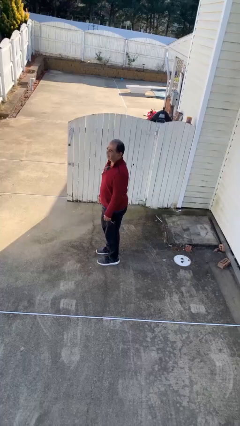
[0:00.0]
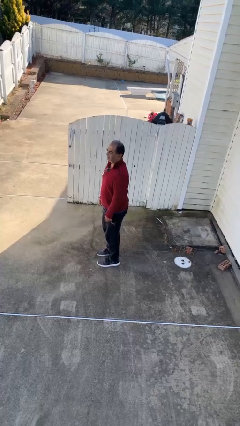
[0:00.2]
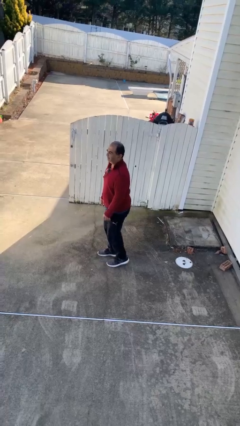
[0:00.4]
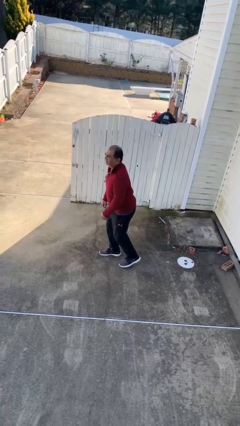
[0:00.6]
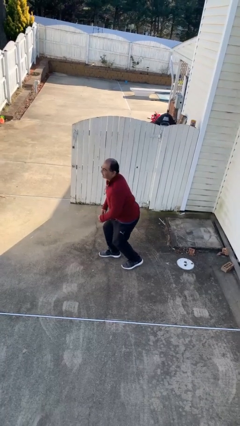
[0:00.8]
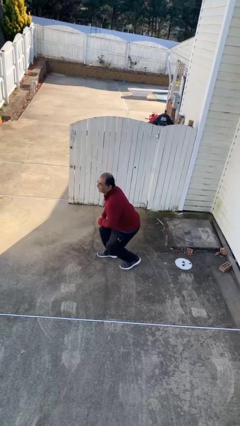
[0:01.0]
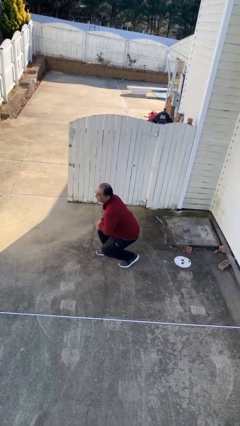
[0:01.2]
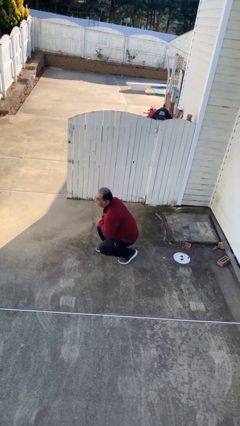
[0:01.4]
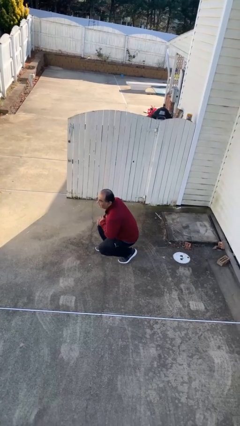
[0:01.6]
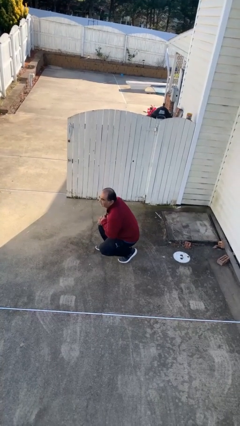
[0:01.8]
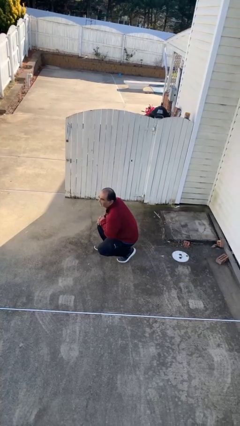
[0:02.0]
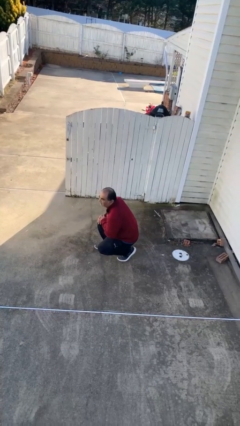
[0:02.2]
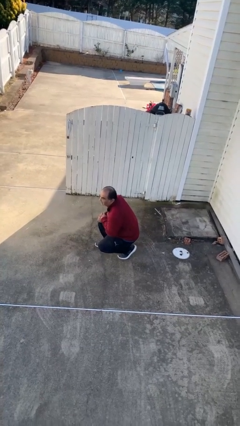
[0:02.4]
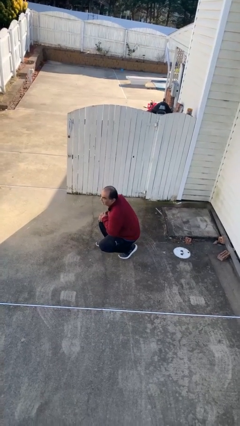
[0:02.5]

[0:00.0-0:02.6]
person sits down

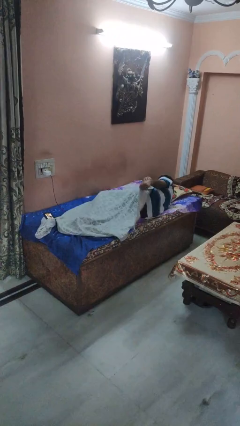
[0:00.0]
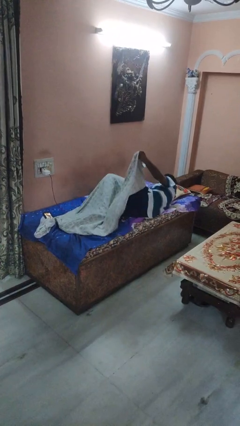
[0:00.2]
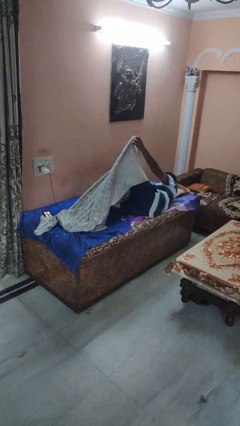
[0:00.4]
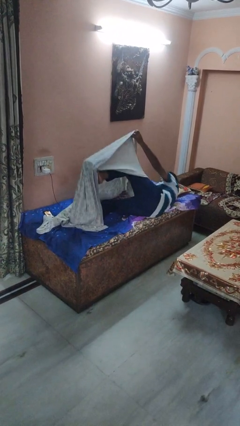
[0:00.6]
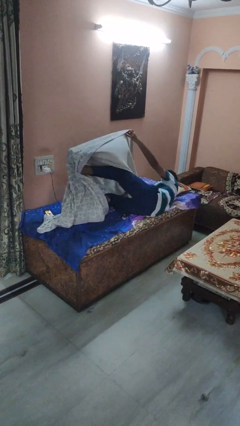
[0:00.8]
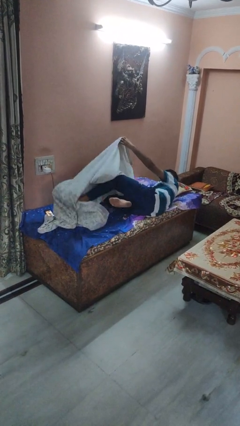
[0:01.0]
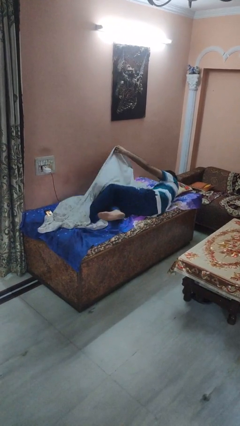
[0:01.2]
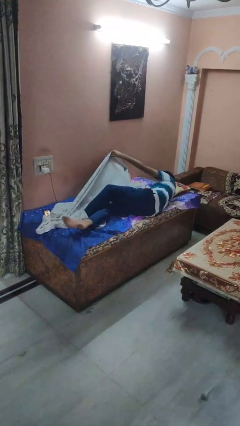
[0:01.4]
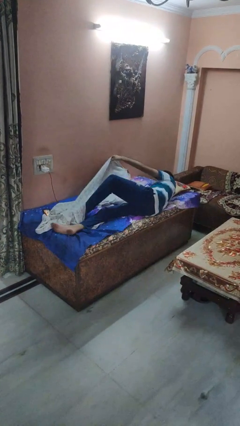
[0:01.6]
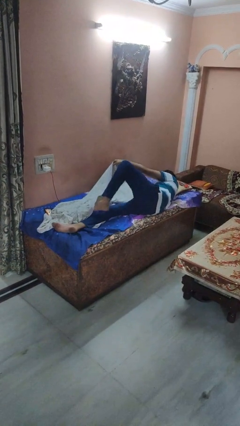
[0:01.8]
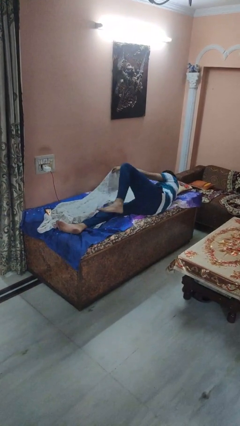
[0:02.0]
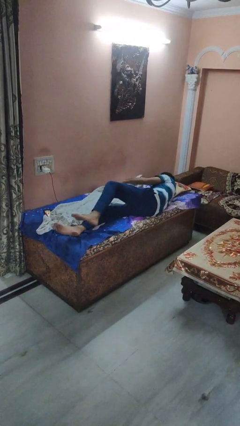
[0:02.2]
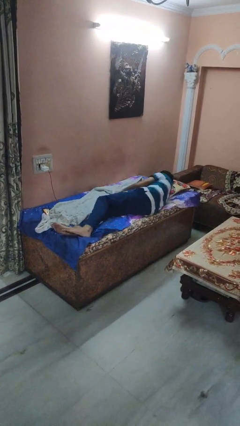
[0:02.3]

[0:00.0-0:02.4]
person uncovers with bedsheets

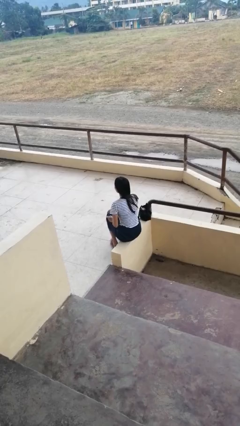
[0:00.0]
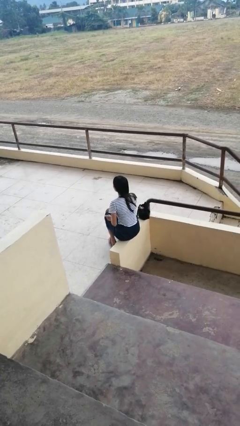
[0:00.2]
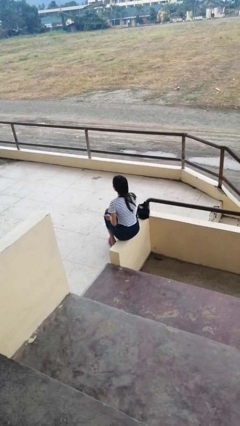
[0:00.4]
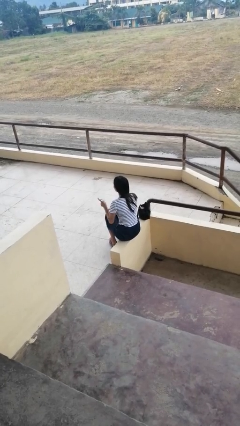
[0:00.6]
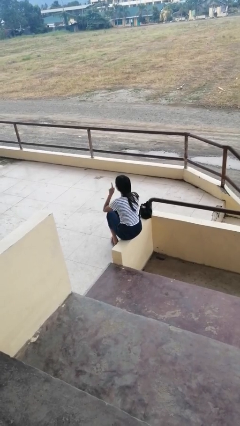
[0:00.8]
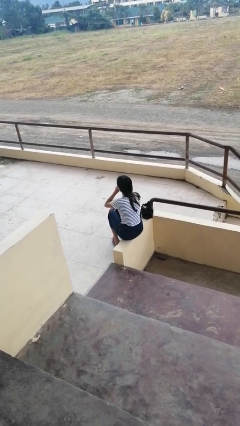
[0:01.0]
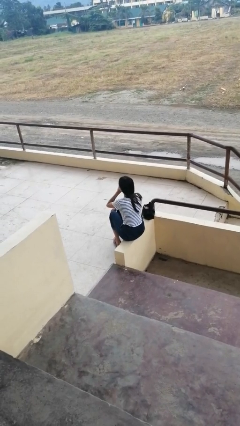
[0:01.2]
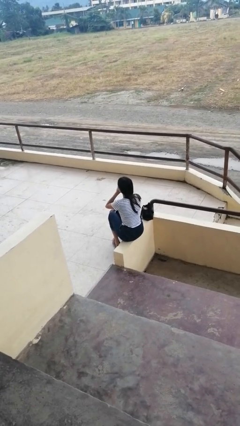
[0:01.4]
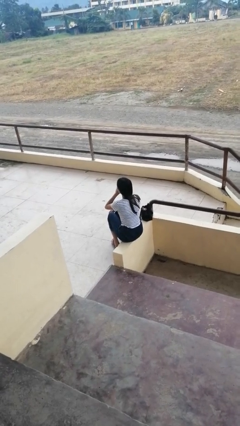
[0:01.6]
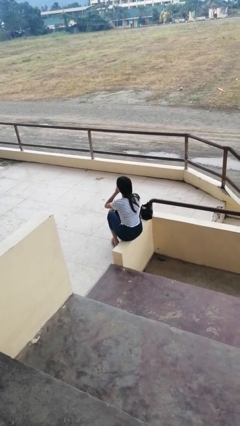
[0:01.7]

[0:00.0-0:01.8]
person gestures be quiet

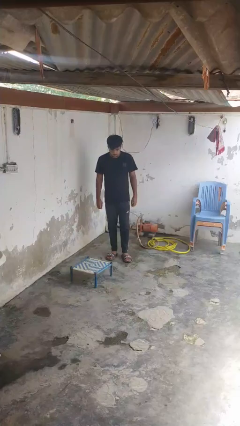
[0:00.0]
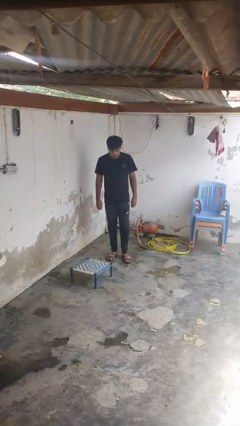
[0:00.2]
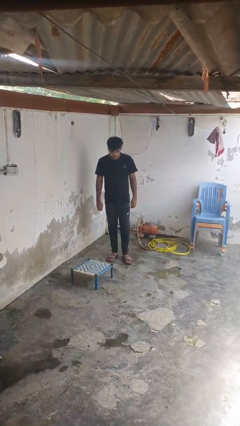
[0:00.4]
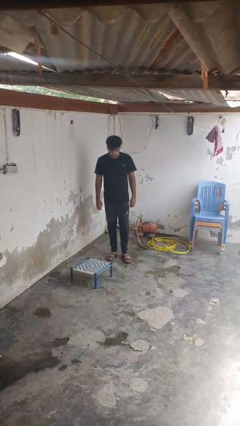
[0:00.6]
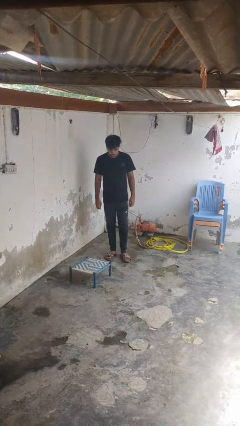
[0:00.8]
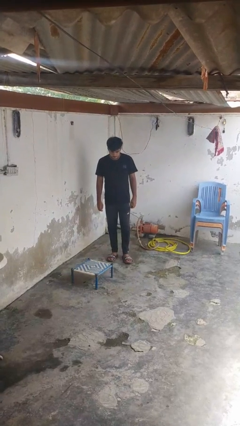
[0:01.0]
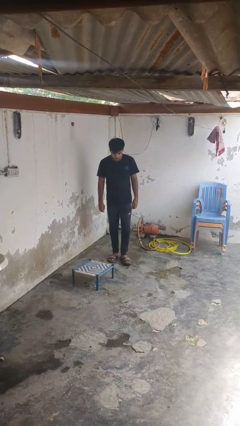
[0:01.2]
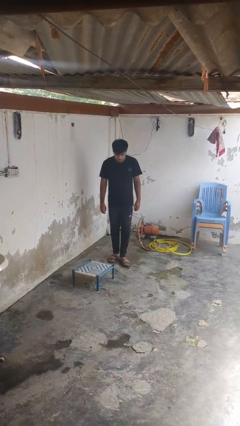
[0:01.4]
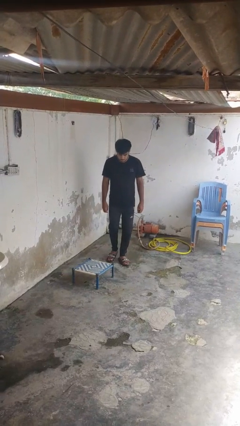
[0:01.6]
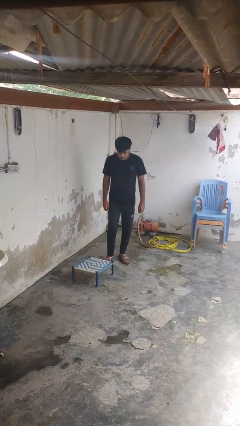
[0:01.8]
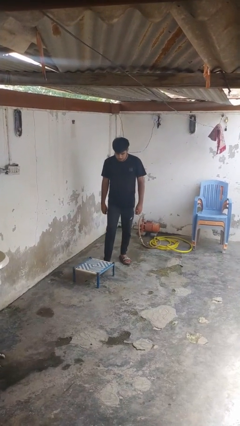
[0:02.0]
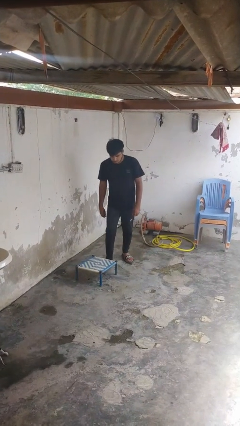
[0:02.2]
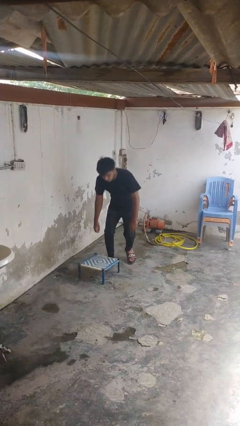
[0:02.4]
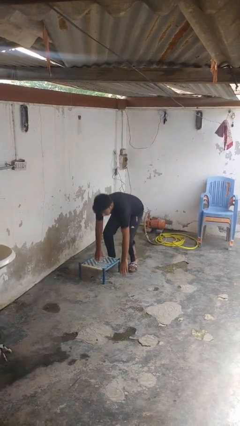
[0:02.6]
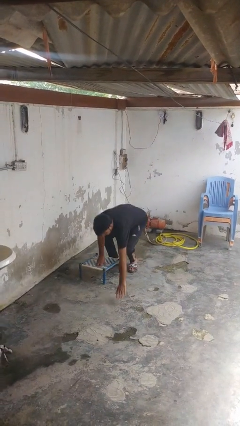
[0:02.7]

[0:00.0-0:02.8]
person trips on object on floor

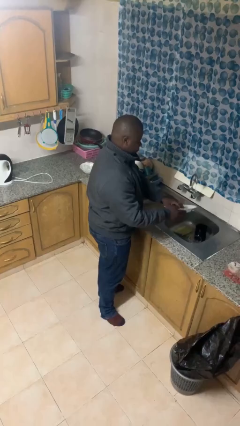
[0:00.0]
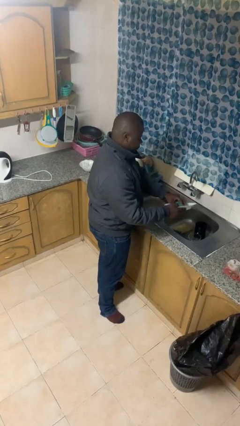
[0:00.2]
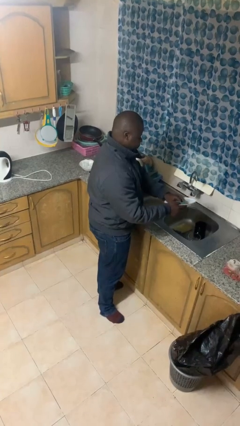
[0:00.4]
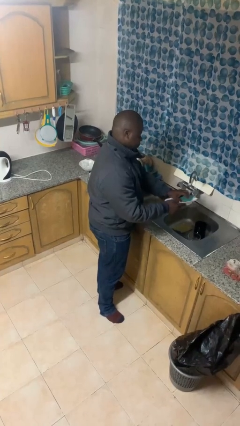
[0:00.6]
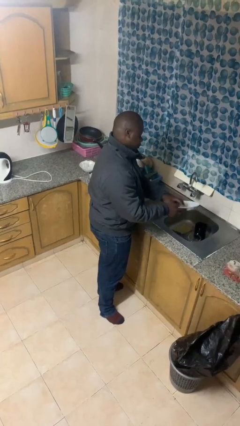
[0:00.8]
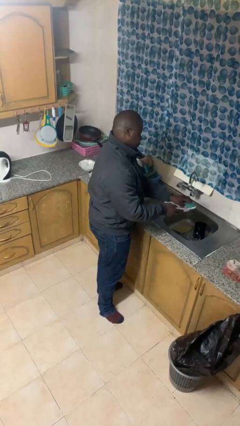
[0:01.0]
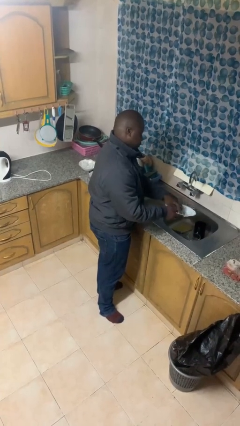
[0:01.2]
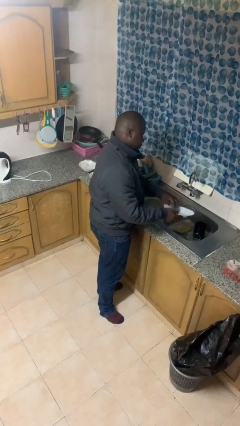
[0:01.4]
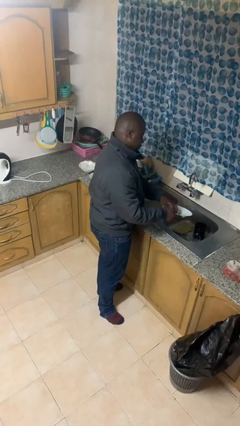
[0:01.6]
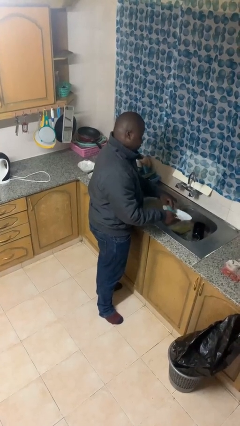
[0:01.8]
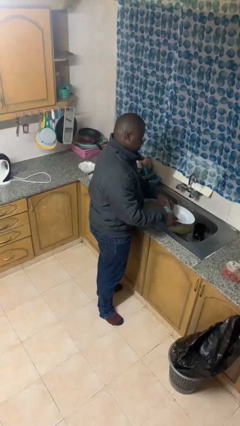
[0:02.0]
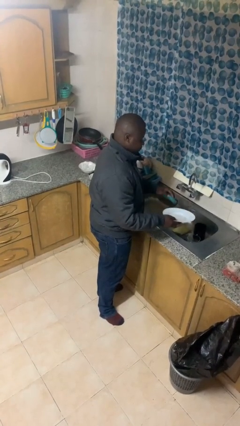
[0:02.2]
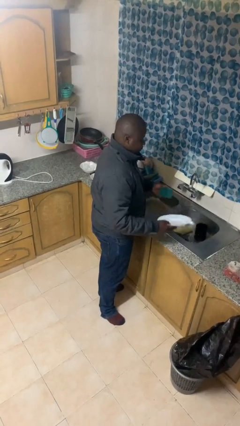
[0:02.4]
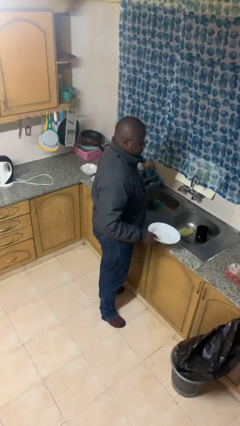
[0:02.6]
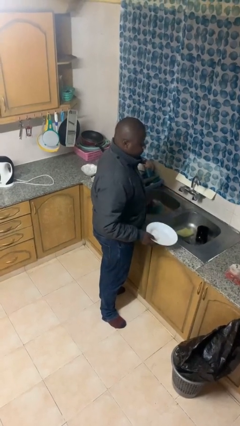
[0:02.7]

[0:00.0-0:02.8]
person washes dish

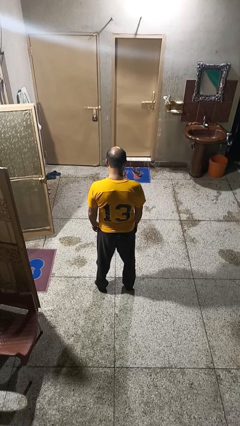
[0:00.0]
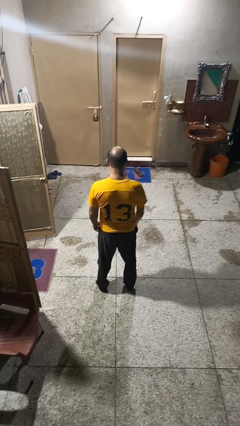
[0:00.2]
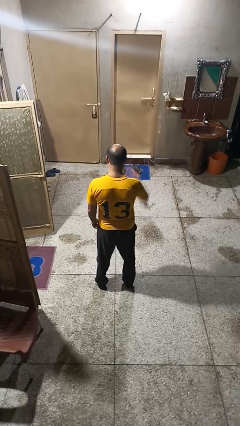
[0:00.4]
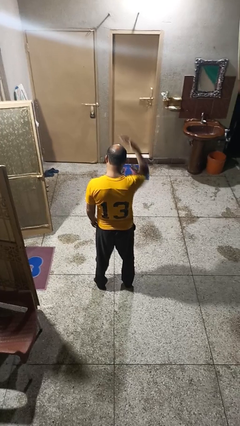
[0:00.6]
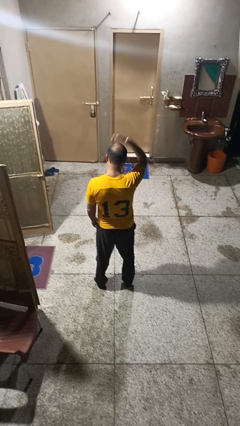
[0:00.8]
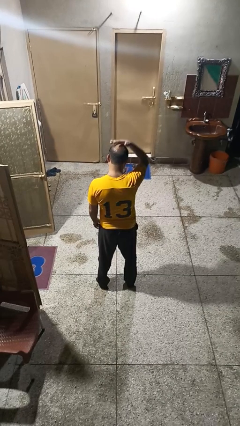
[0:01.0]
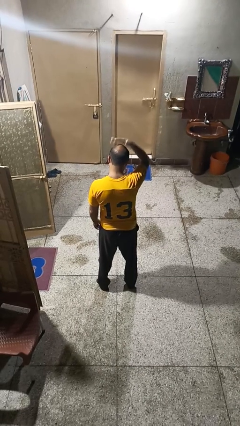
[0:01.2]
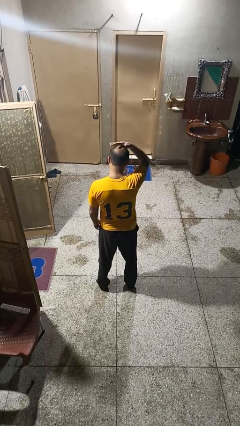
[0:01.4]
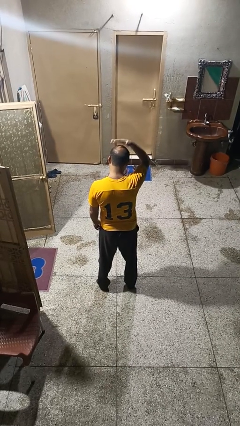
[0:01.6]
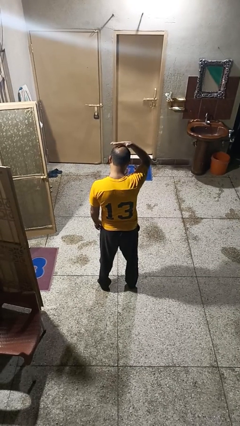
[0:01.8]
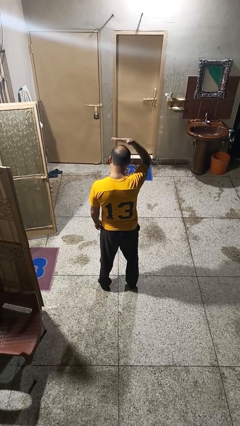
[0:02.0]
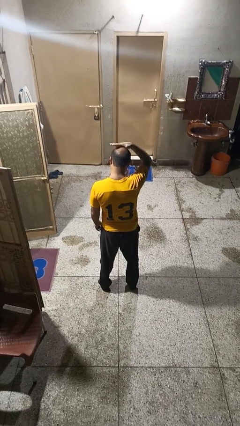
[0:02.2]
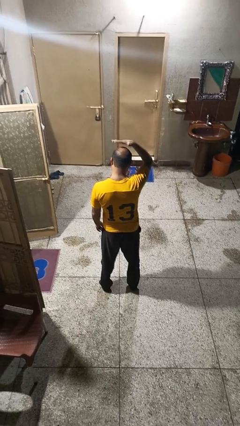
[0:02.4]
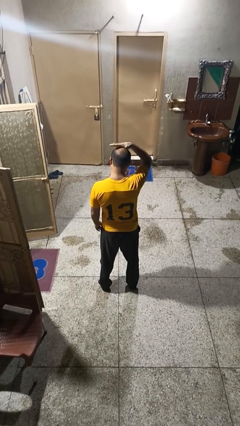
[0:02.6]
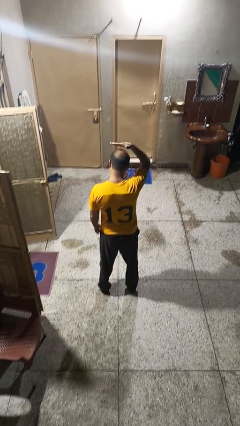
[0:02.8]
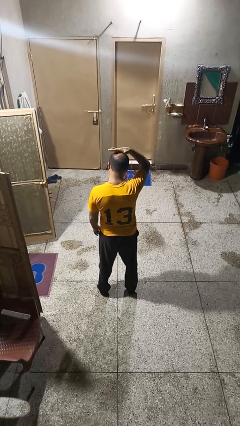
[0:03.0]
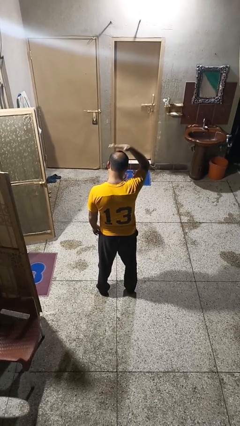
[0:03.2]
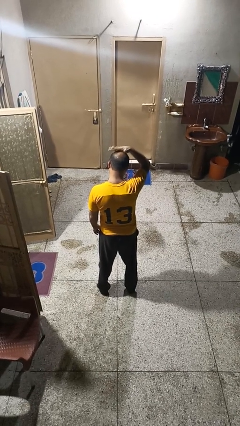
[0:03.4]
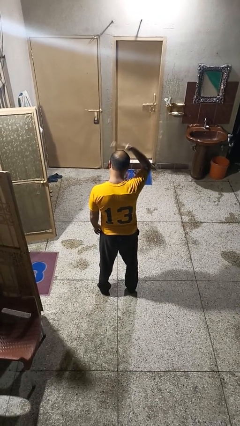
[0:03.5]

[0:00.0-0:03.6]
person pats head

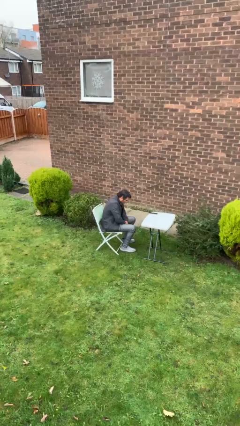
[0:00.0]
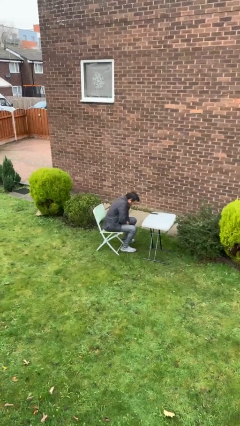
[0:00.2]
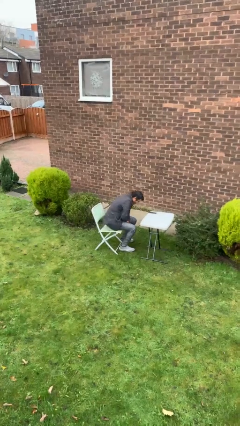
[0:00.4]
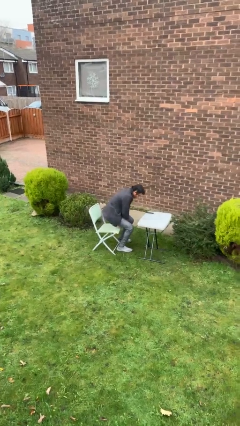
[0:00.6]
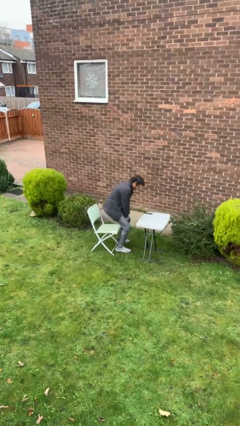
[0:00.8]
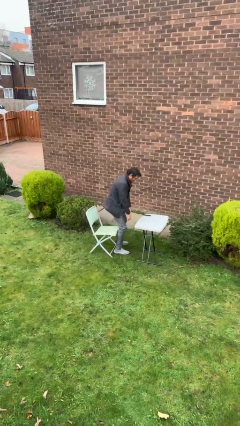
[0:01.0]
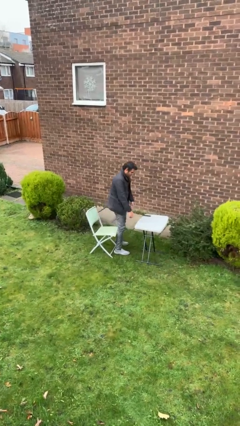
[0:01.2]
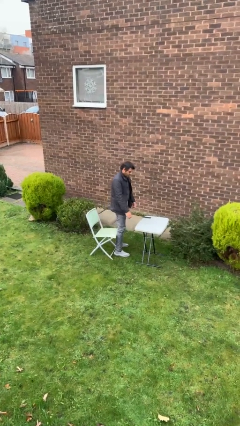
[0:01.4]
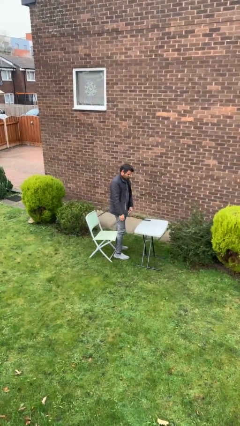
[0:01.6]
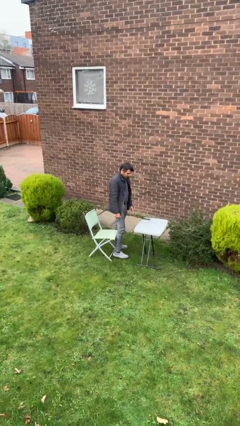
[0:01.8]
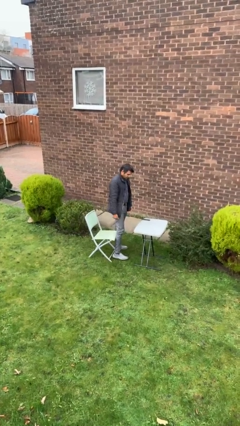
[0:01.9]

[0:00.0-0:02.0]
person stands up
